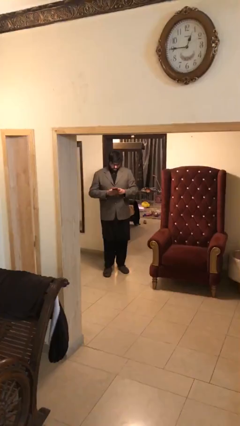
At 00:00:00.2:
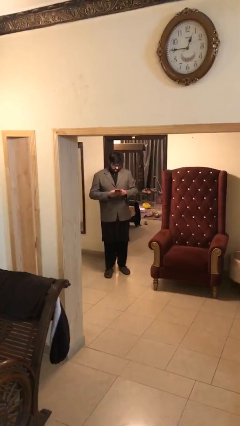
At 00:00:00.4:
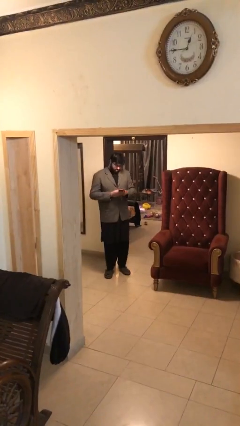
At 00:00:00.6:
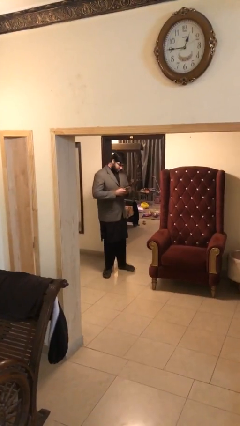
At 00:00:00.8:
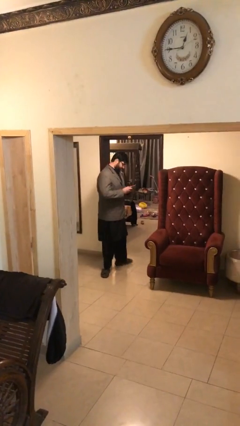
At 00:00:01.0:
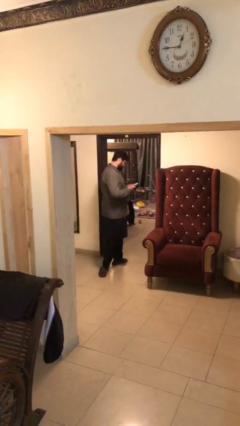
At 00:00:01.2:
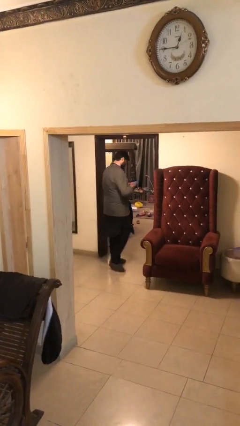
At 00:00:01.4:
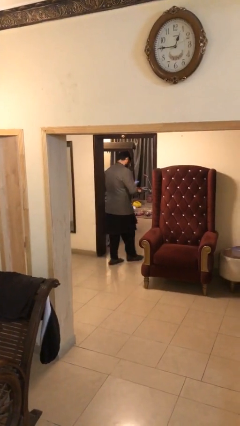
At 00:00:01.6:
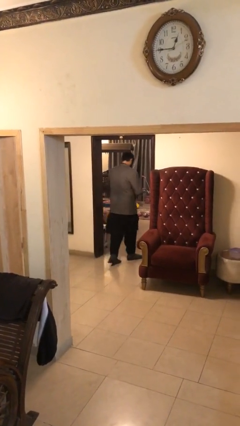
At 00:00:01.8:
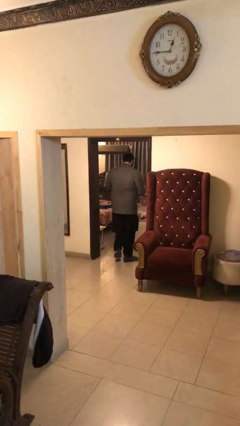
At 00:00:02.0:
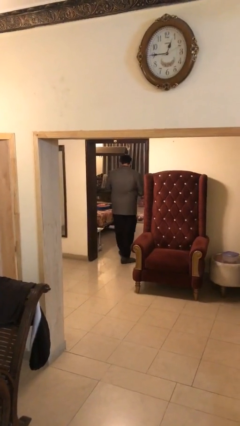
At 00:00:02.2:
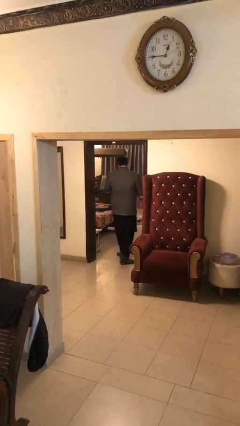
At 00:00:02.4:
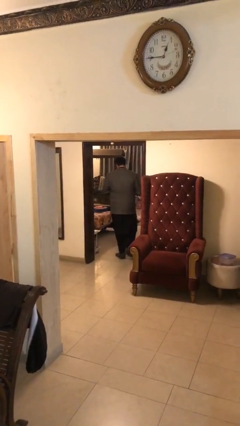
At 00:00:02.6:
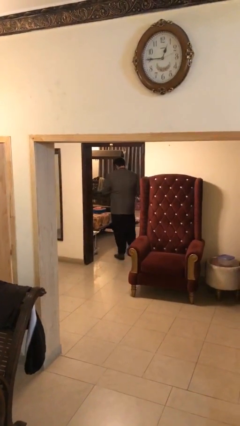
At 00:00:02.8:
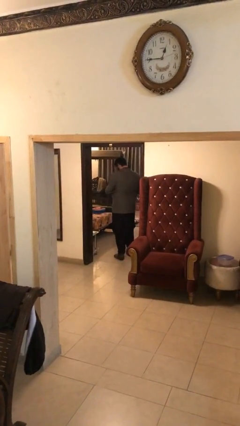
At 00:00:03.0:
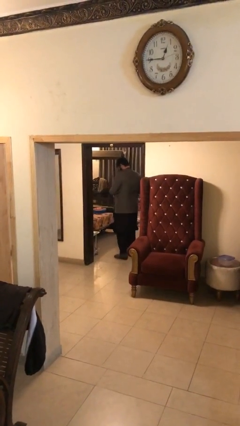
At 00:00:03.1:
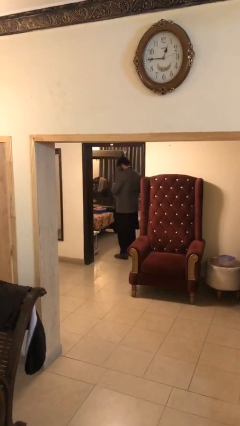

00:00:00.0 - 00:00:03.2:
person exits scene through structure

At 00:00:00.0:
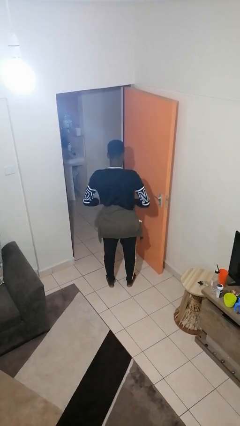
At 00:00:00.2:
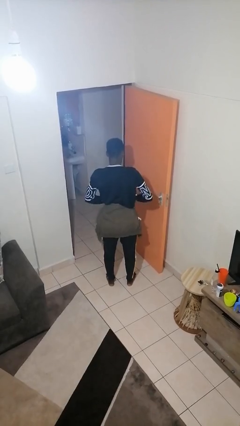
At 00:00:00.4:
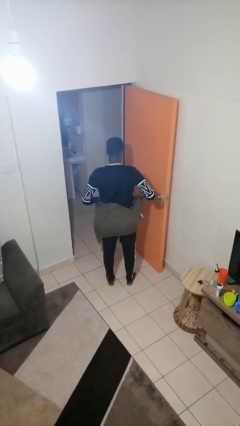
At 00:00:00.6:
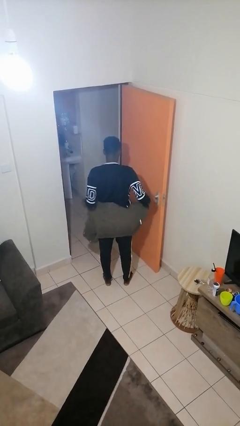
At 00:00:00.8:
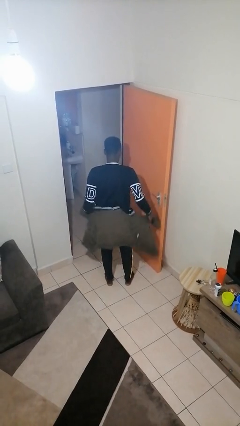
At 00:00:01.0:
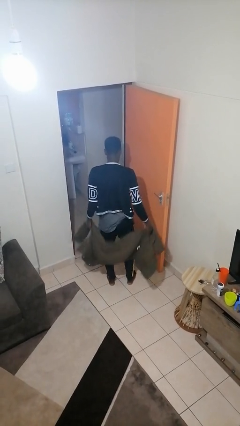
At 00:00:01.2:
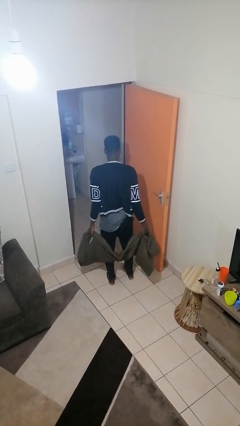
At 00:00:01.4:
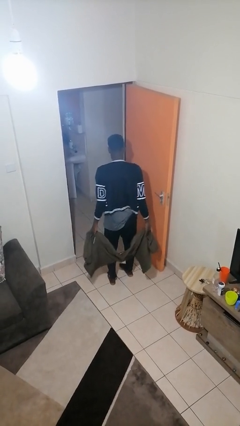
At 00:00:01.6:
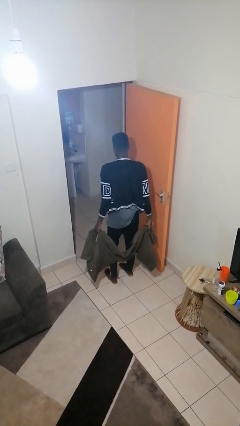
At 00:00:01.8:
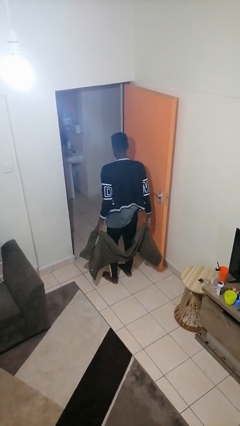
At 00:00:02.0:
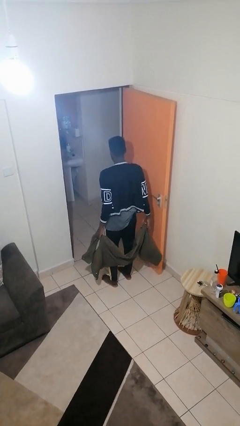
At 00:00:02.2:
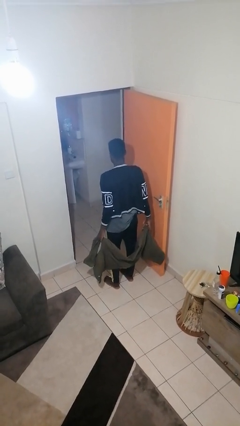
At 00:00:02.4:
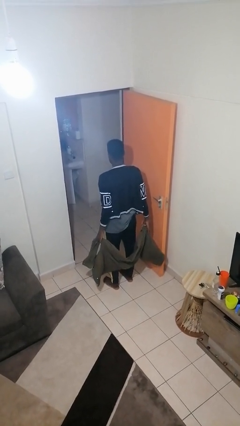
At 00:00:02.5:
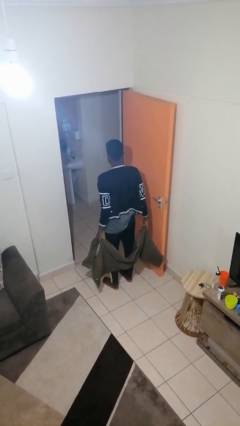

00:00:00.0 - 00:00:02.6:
person unties jacket around waist

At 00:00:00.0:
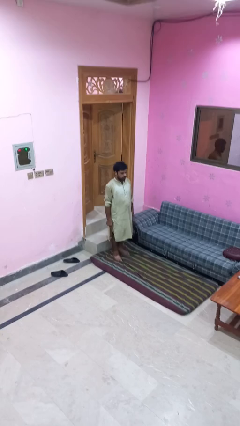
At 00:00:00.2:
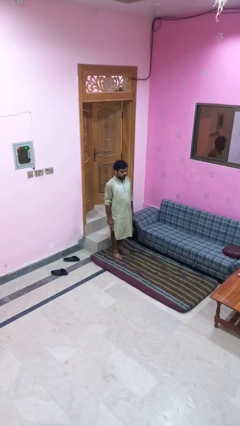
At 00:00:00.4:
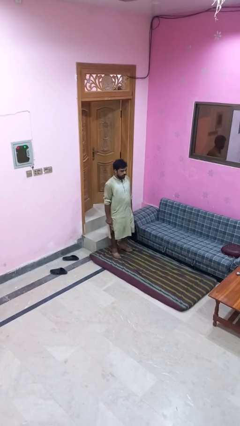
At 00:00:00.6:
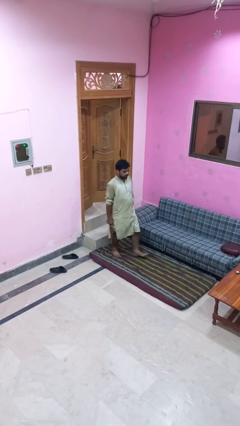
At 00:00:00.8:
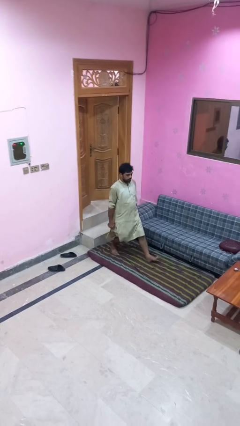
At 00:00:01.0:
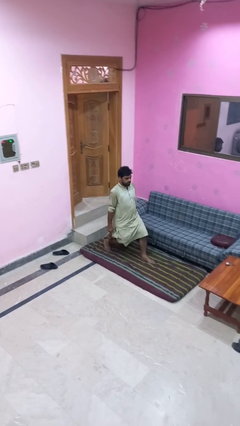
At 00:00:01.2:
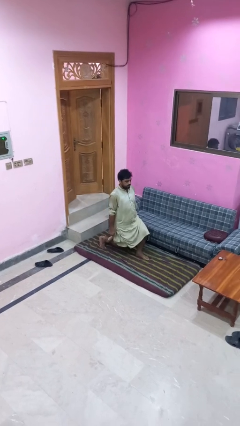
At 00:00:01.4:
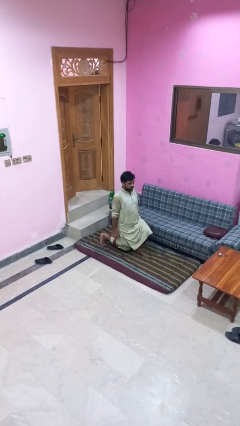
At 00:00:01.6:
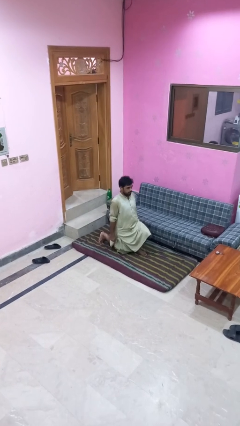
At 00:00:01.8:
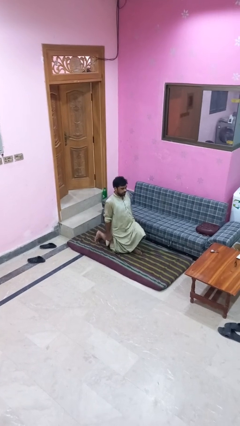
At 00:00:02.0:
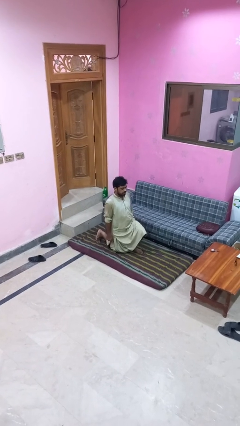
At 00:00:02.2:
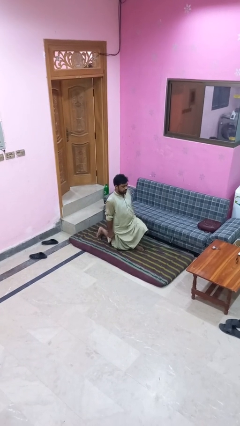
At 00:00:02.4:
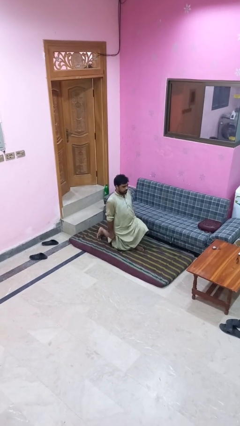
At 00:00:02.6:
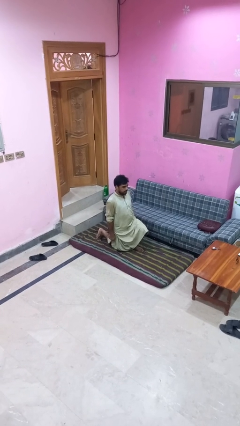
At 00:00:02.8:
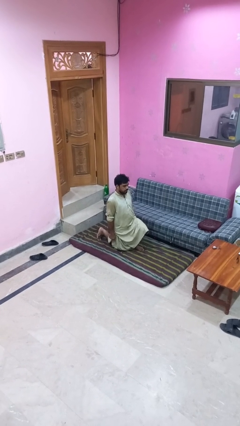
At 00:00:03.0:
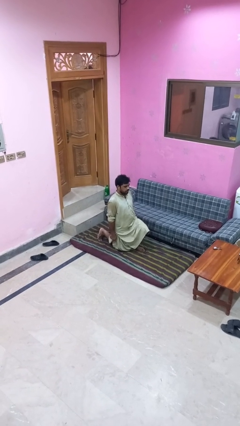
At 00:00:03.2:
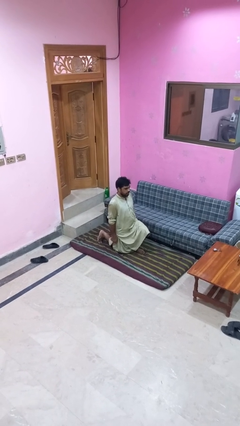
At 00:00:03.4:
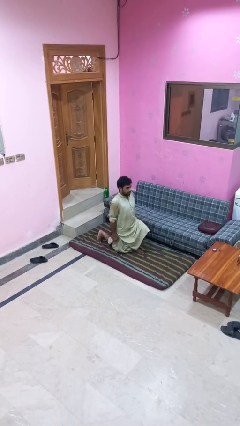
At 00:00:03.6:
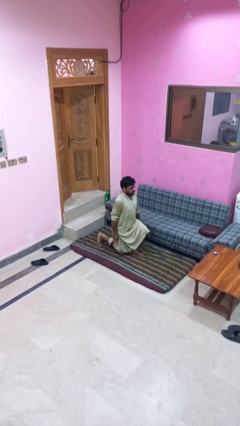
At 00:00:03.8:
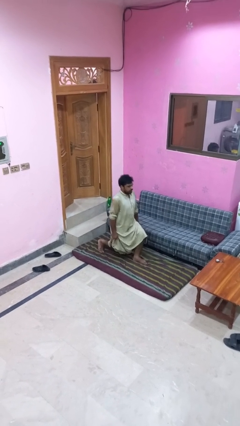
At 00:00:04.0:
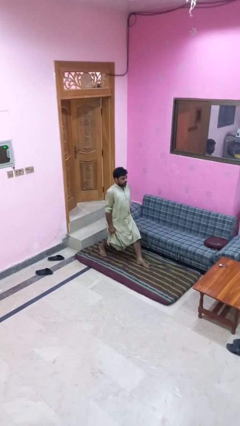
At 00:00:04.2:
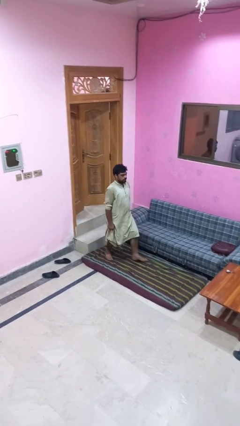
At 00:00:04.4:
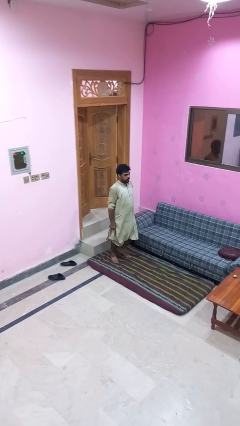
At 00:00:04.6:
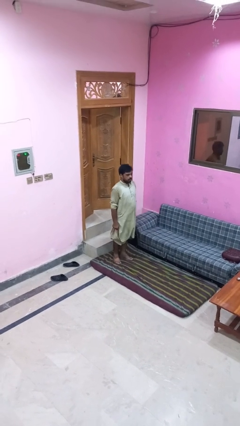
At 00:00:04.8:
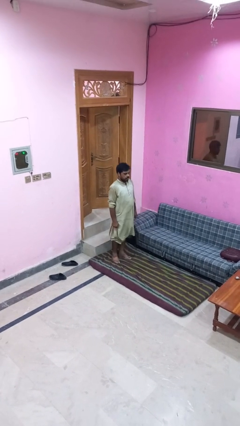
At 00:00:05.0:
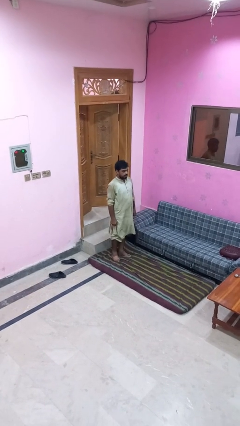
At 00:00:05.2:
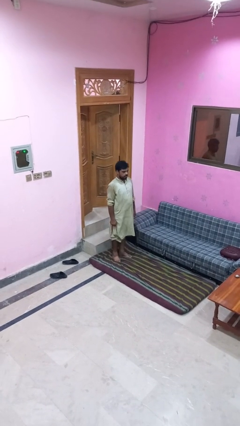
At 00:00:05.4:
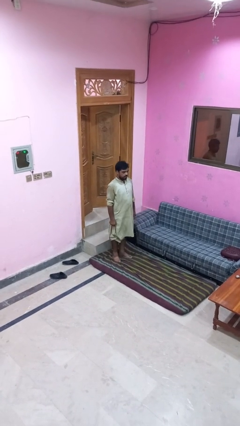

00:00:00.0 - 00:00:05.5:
person exercises with lunges

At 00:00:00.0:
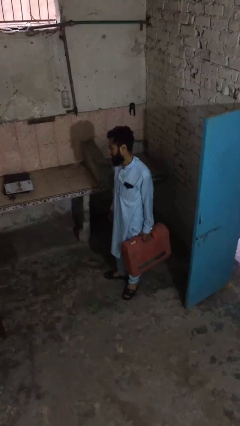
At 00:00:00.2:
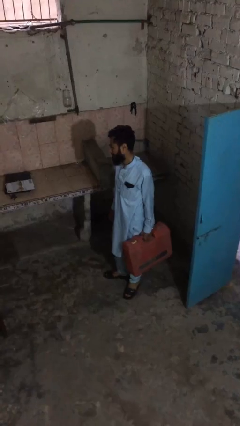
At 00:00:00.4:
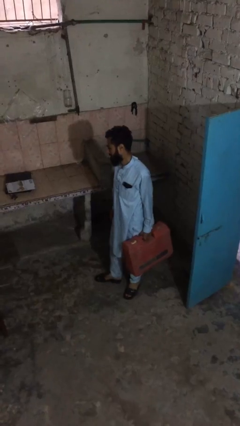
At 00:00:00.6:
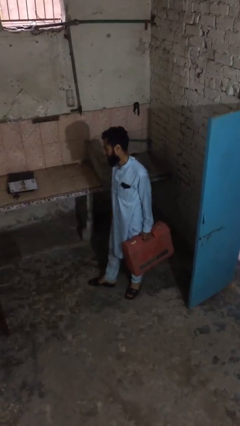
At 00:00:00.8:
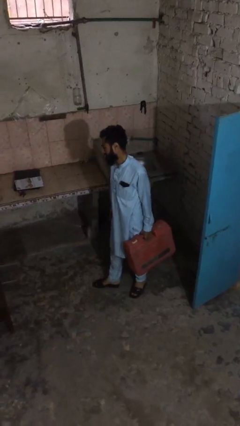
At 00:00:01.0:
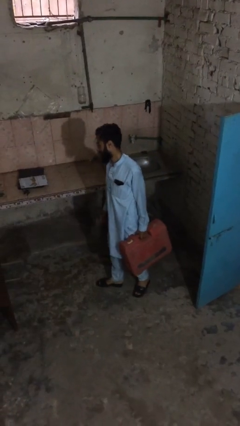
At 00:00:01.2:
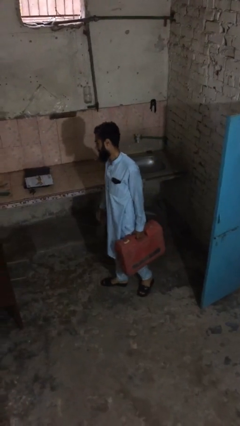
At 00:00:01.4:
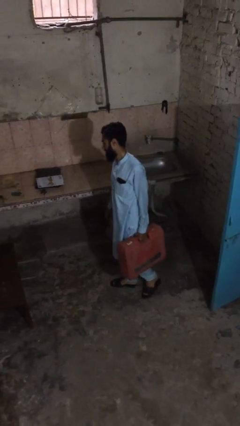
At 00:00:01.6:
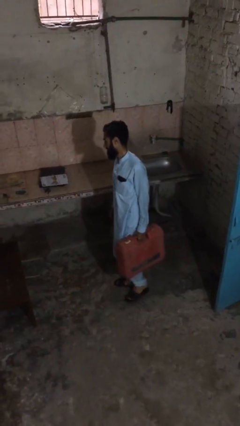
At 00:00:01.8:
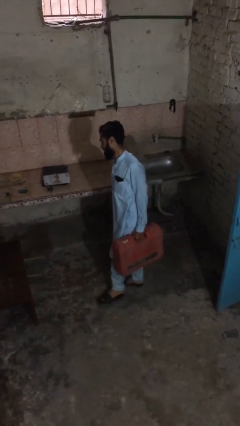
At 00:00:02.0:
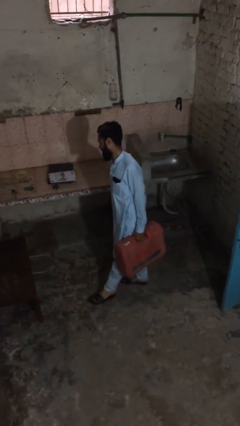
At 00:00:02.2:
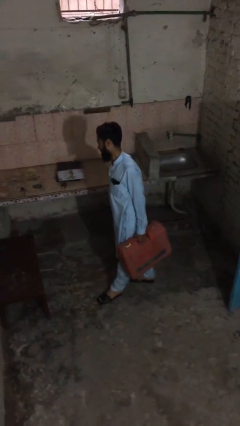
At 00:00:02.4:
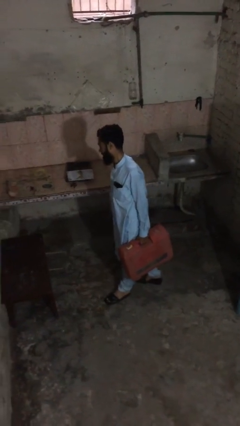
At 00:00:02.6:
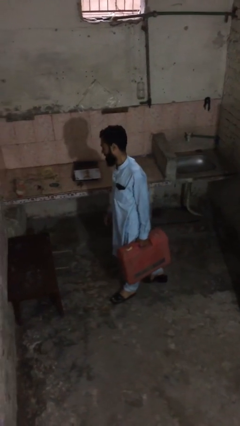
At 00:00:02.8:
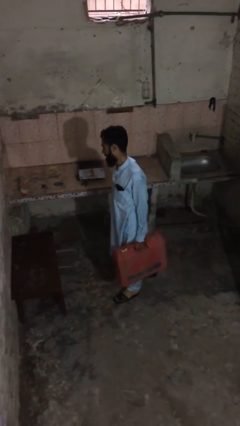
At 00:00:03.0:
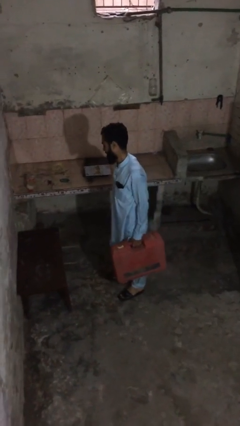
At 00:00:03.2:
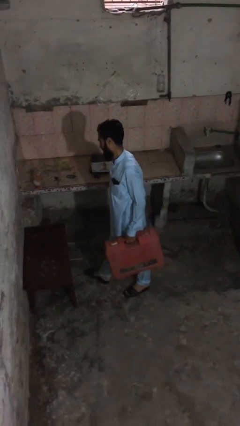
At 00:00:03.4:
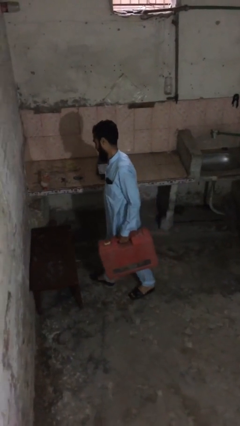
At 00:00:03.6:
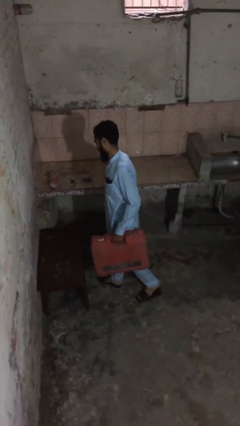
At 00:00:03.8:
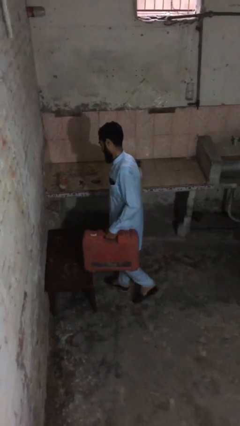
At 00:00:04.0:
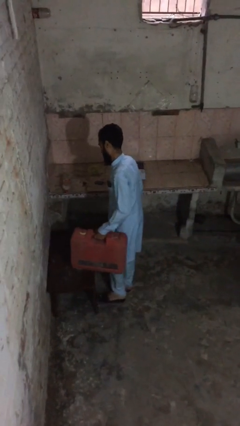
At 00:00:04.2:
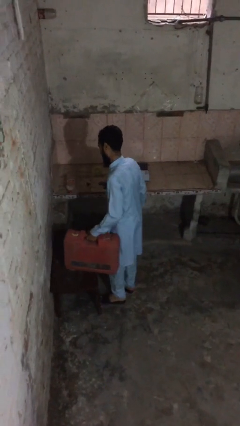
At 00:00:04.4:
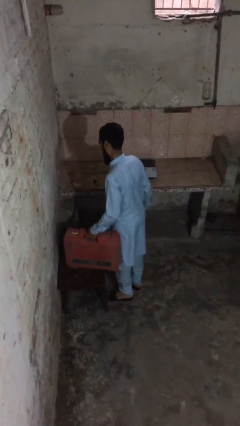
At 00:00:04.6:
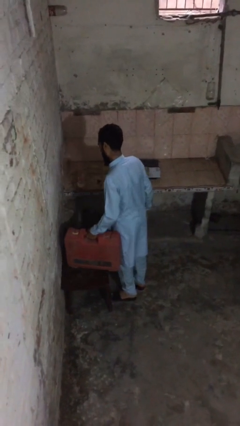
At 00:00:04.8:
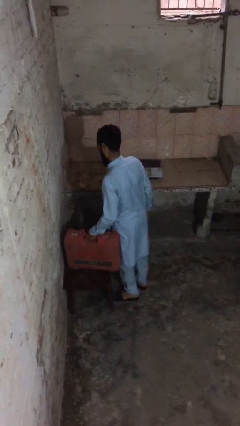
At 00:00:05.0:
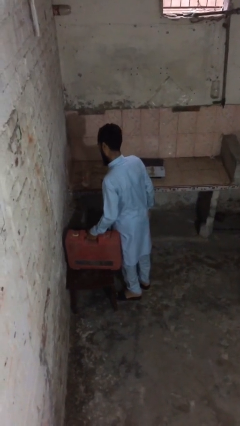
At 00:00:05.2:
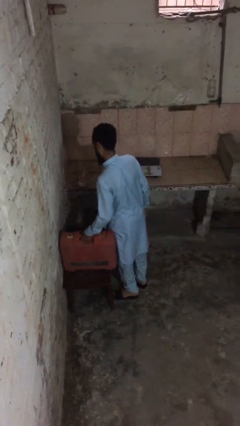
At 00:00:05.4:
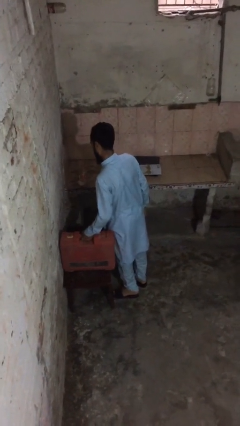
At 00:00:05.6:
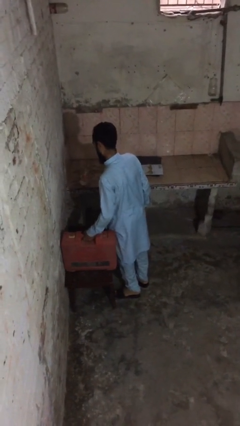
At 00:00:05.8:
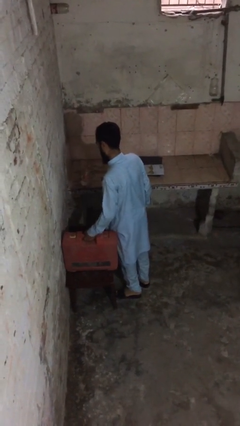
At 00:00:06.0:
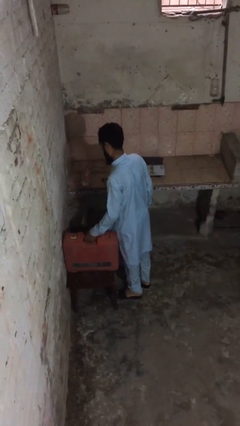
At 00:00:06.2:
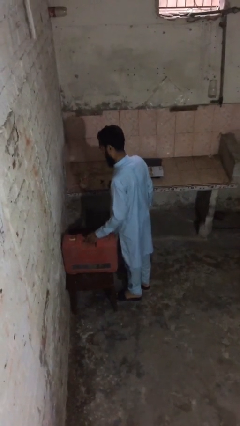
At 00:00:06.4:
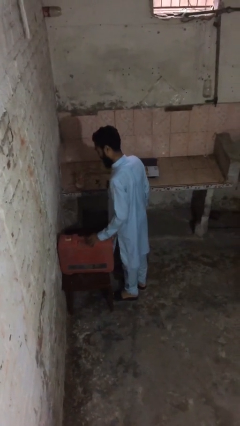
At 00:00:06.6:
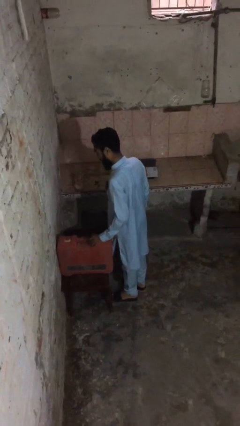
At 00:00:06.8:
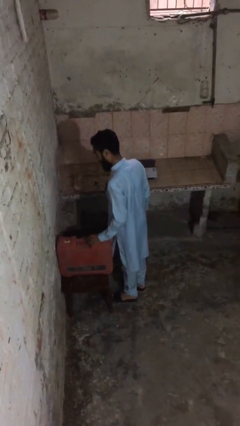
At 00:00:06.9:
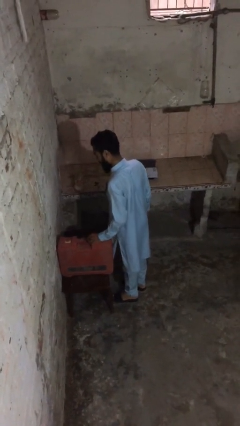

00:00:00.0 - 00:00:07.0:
person puts down object on table
